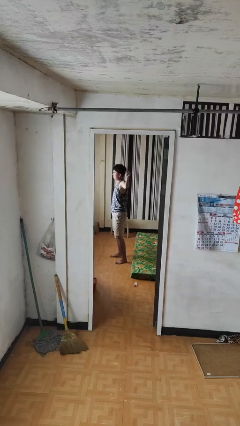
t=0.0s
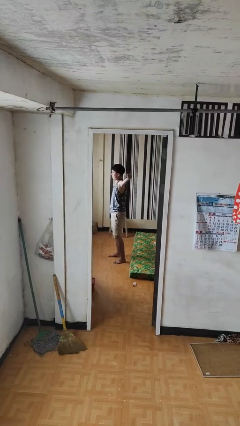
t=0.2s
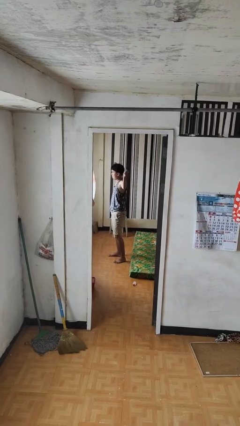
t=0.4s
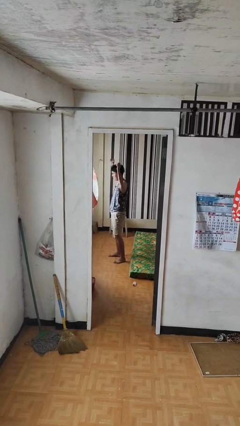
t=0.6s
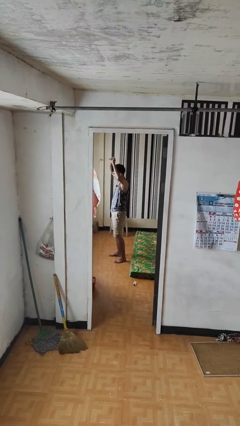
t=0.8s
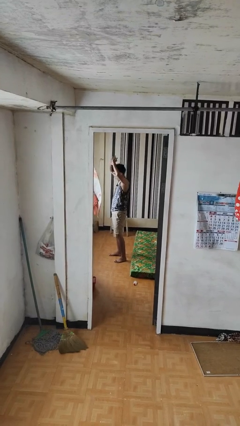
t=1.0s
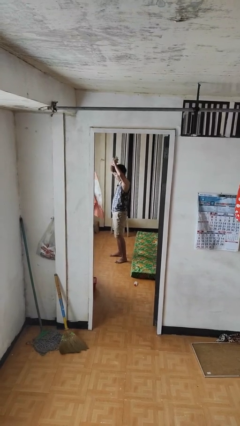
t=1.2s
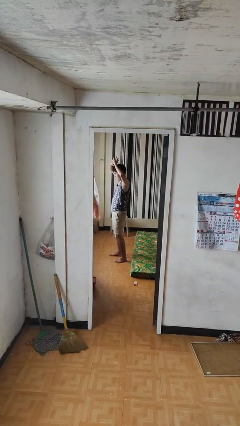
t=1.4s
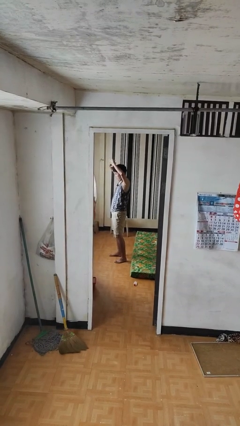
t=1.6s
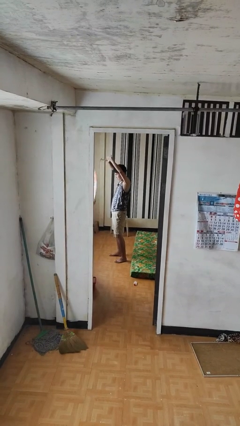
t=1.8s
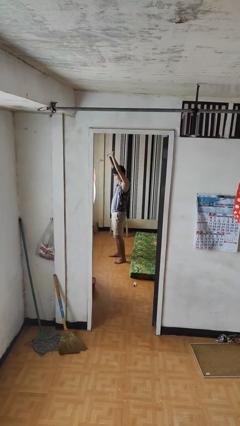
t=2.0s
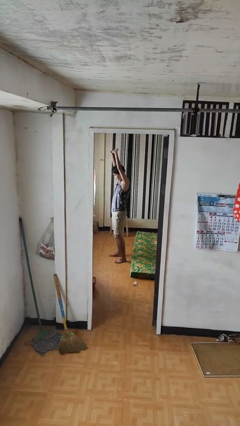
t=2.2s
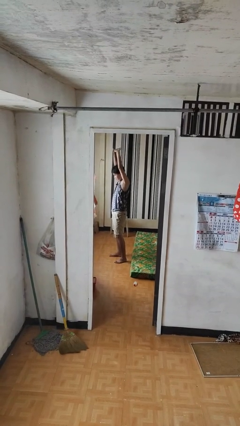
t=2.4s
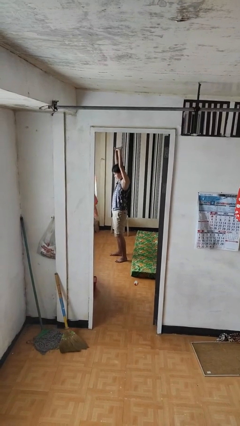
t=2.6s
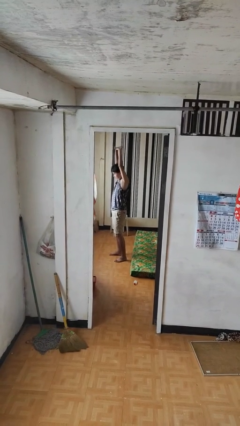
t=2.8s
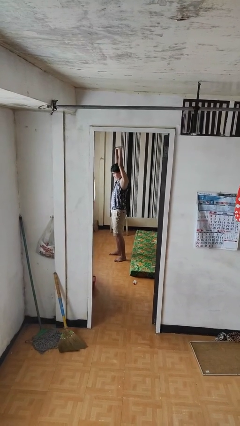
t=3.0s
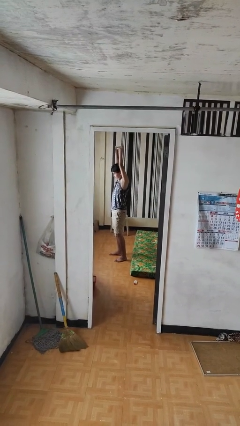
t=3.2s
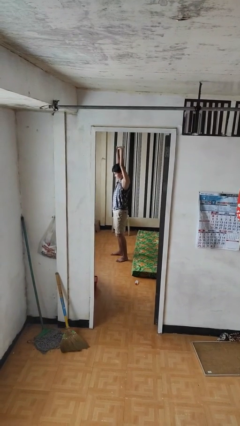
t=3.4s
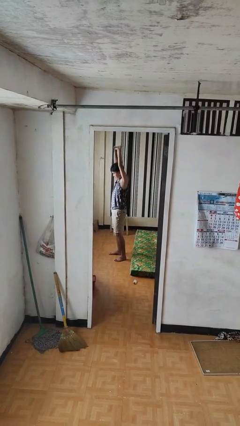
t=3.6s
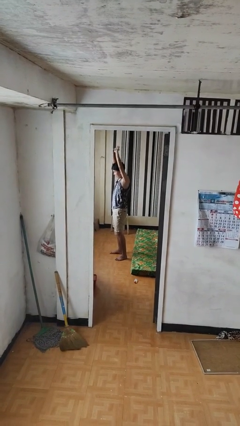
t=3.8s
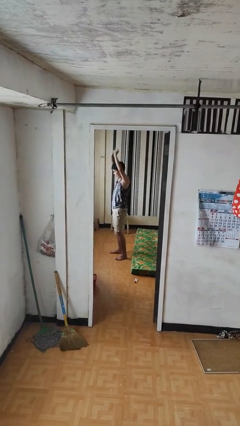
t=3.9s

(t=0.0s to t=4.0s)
person stretches arms over head

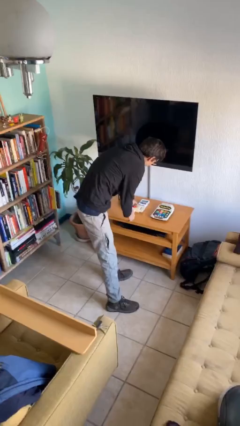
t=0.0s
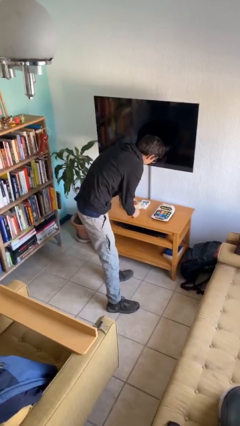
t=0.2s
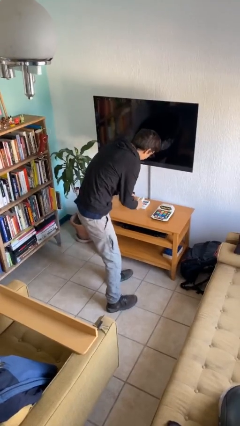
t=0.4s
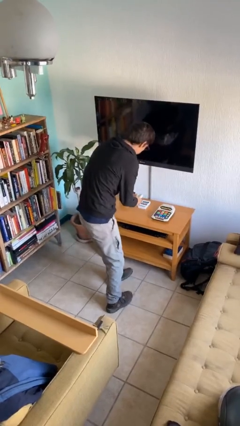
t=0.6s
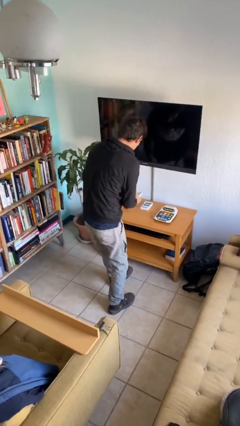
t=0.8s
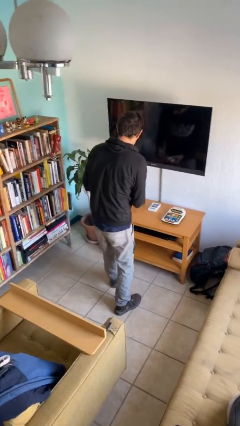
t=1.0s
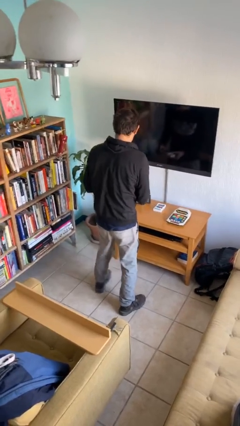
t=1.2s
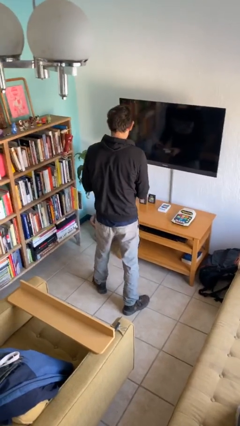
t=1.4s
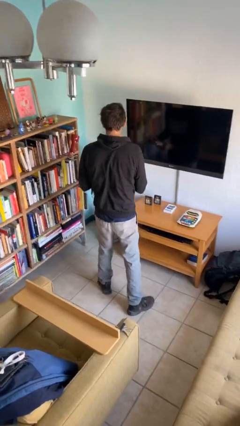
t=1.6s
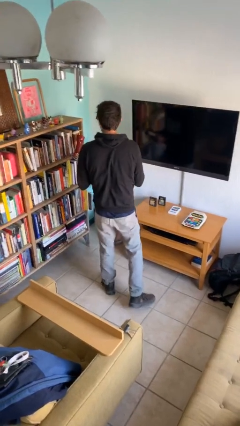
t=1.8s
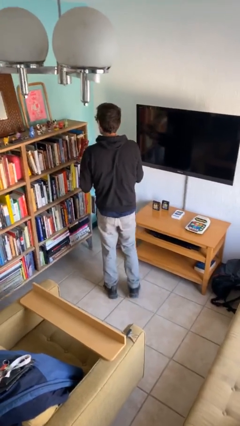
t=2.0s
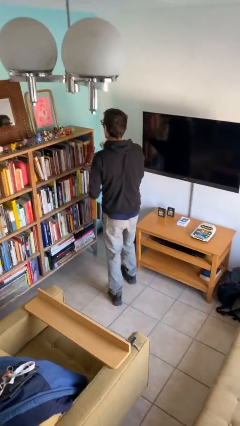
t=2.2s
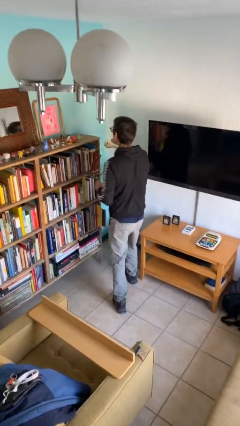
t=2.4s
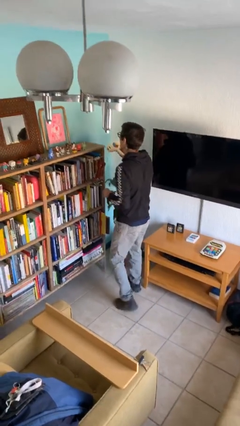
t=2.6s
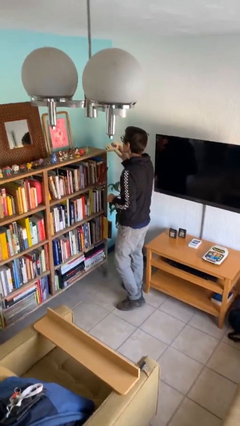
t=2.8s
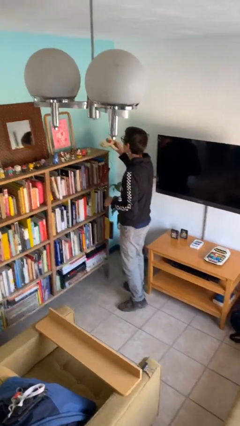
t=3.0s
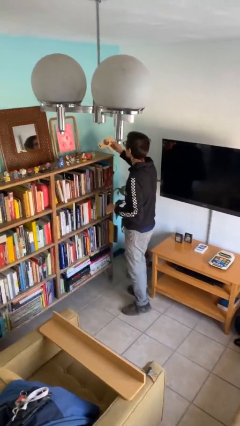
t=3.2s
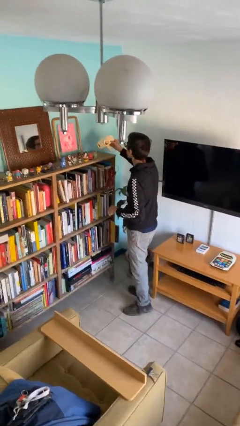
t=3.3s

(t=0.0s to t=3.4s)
person picks up object from table

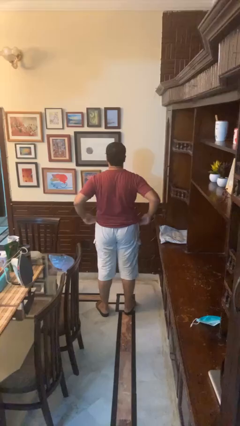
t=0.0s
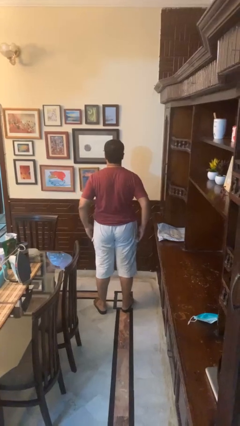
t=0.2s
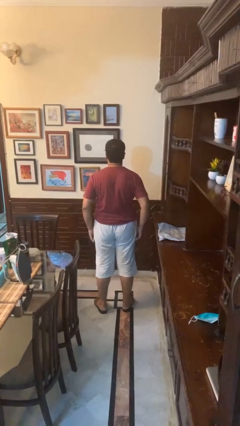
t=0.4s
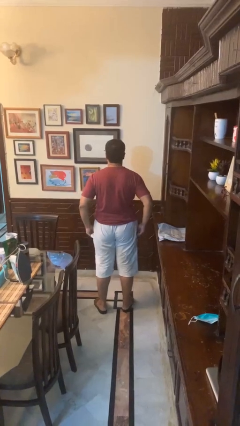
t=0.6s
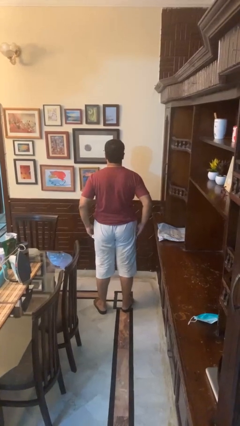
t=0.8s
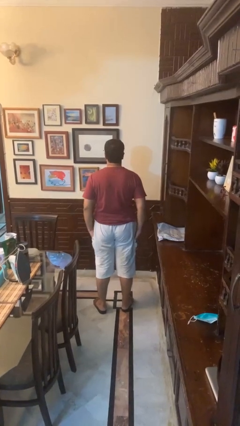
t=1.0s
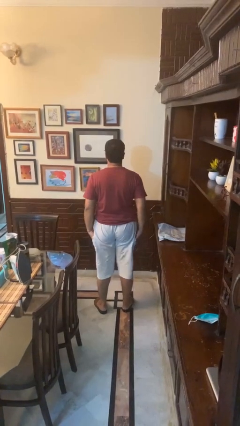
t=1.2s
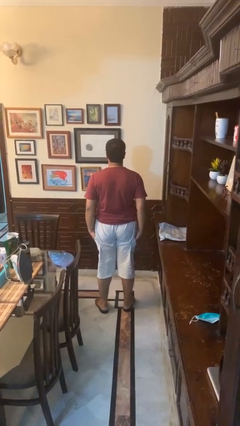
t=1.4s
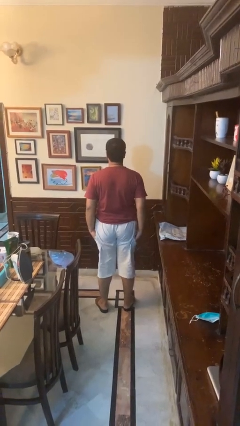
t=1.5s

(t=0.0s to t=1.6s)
person puts hands in back pockets

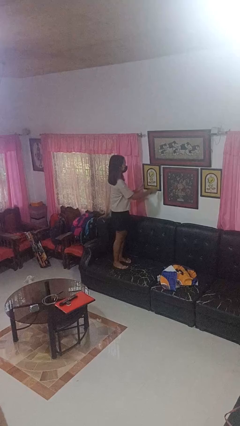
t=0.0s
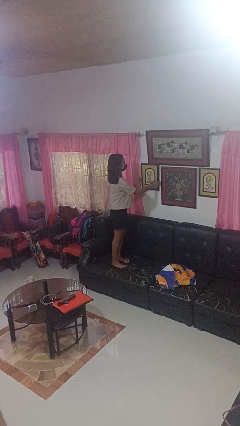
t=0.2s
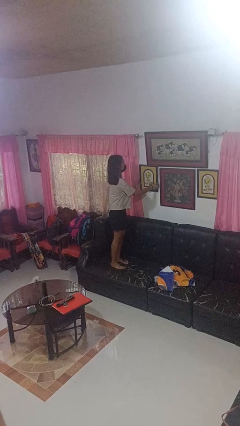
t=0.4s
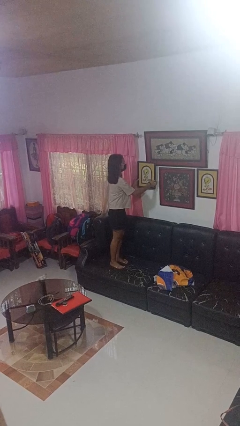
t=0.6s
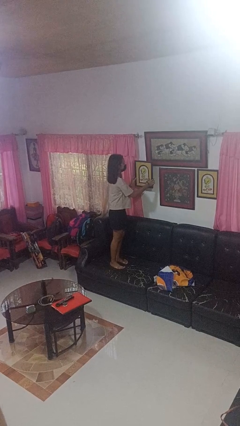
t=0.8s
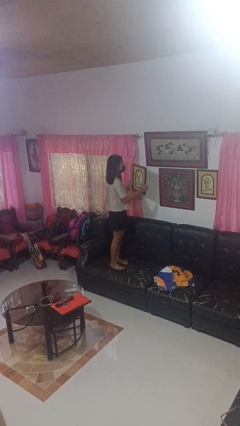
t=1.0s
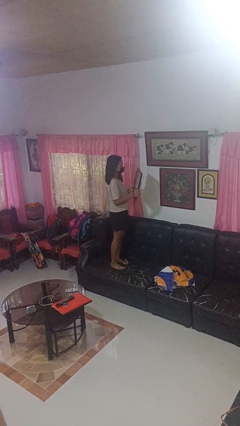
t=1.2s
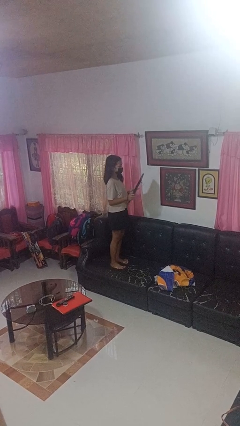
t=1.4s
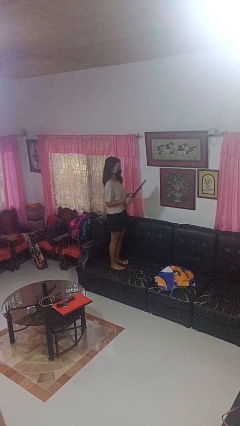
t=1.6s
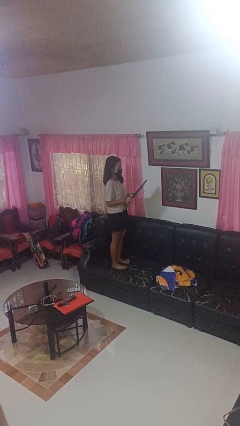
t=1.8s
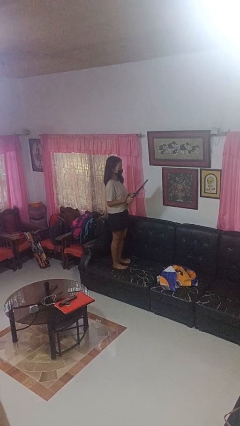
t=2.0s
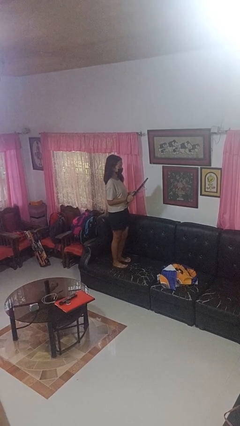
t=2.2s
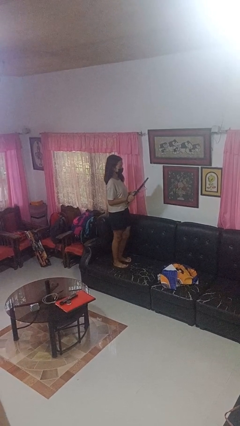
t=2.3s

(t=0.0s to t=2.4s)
person takes down picture frame

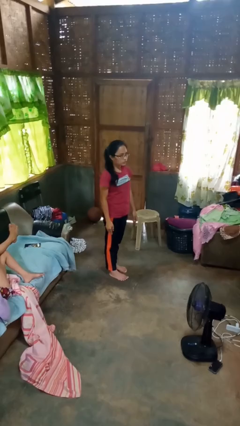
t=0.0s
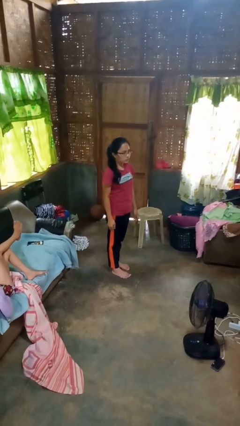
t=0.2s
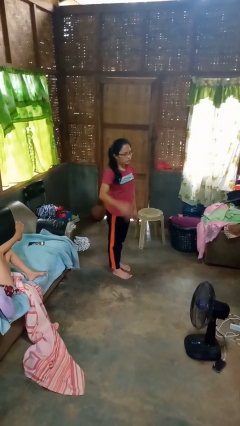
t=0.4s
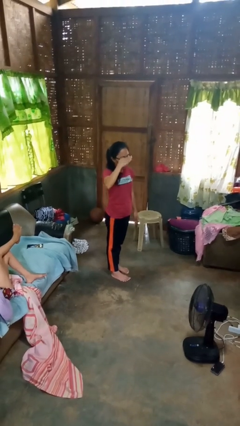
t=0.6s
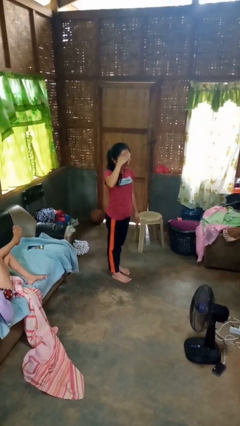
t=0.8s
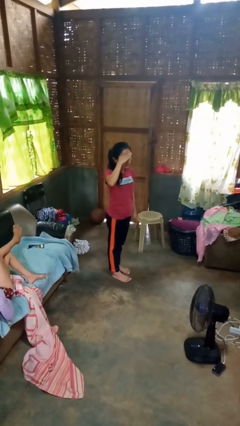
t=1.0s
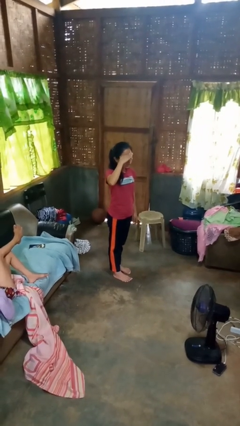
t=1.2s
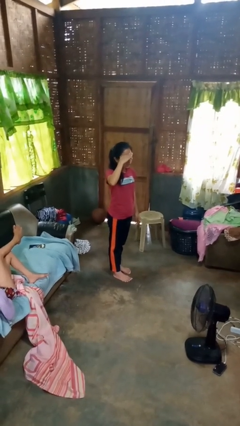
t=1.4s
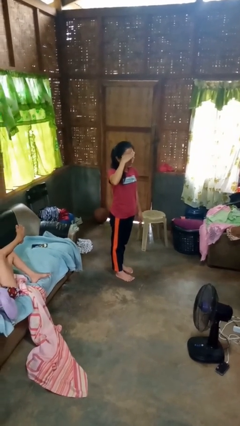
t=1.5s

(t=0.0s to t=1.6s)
person salutes

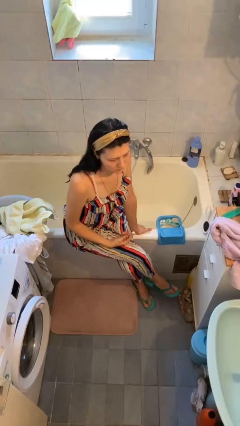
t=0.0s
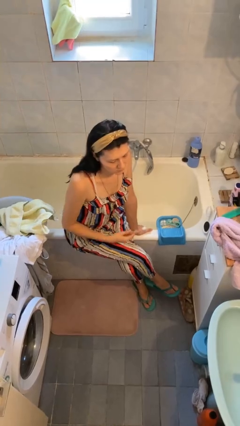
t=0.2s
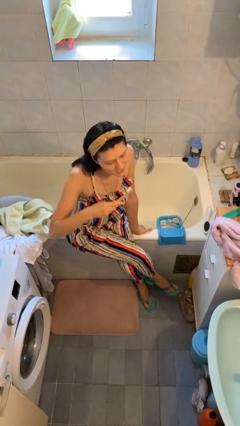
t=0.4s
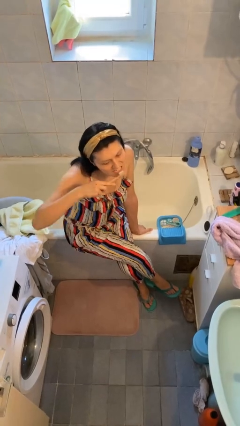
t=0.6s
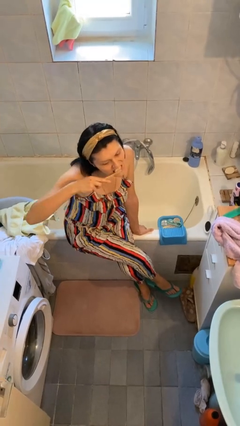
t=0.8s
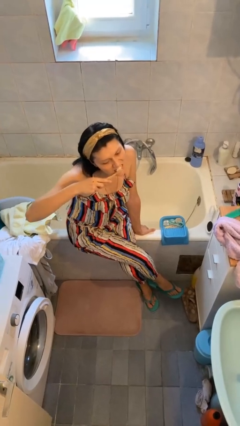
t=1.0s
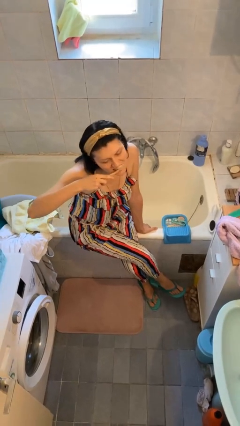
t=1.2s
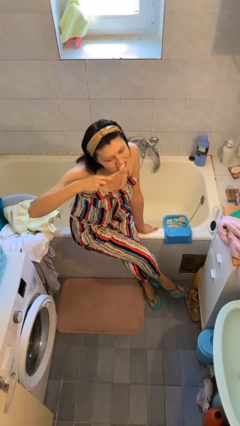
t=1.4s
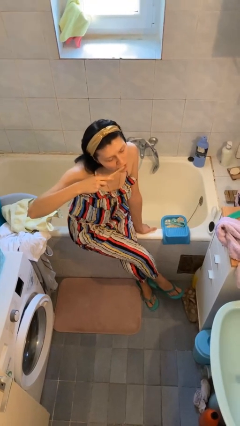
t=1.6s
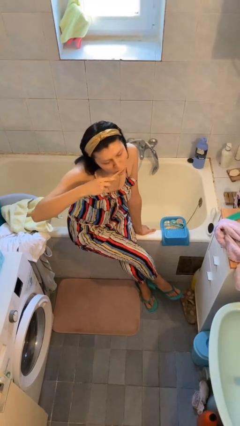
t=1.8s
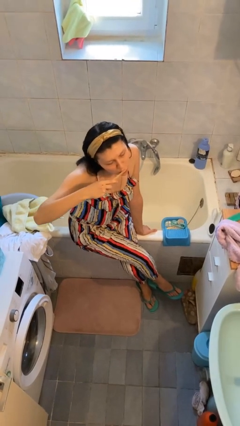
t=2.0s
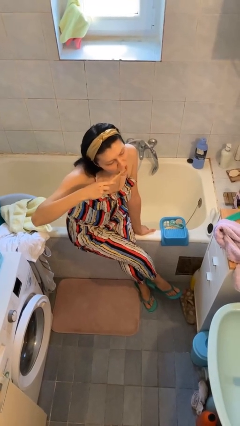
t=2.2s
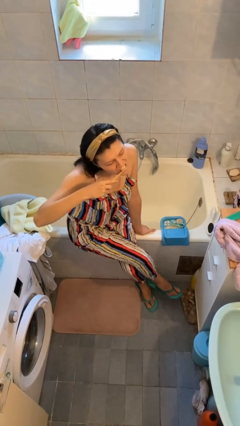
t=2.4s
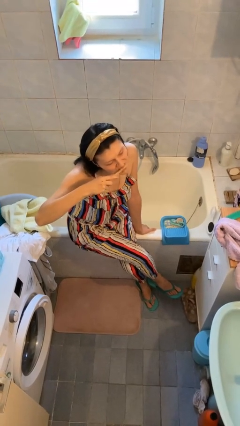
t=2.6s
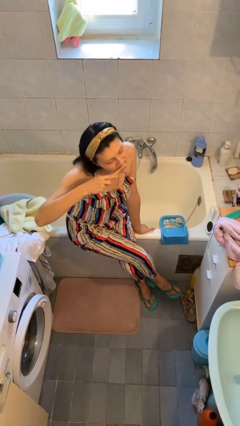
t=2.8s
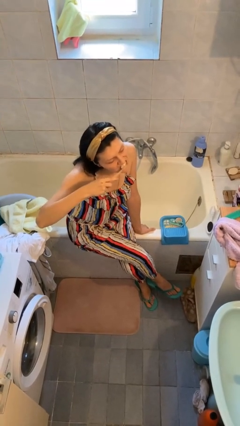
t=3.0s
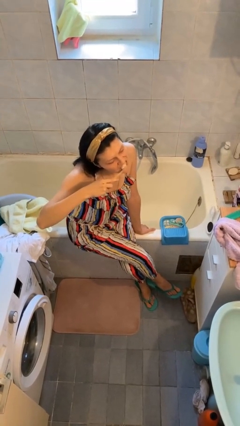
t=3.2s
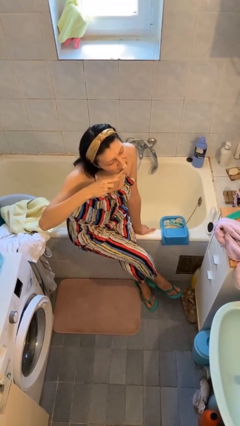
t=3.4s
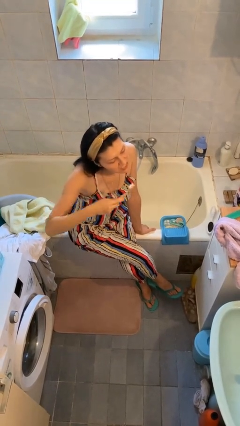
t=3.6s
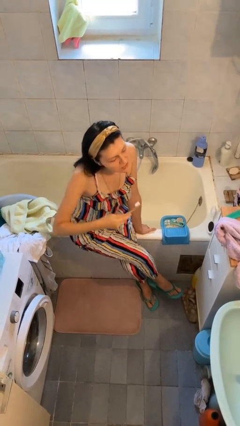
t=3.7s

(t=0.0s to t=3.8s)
person brushes teeth

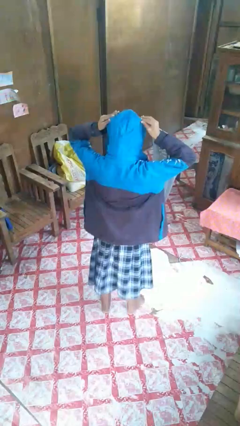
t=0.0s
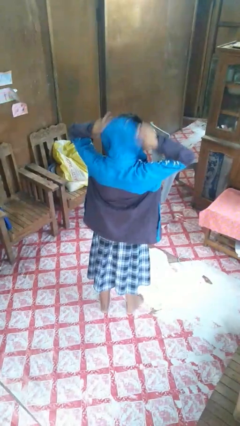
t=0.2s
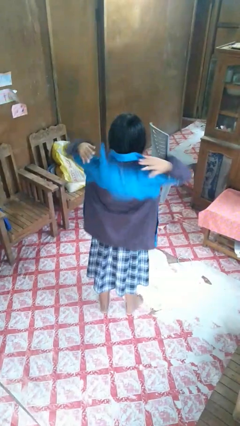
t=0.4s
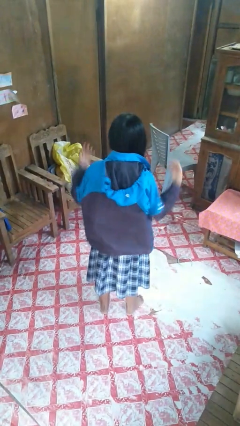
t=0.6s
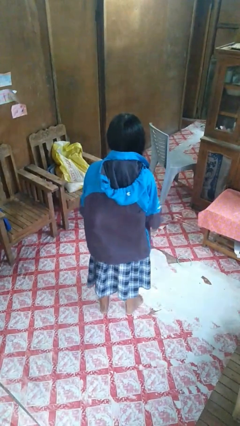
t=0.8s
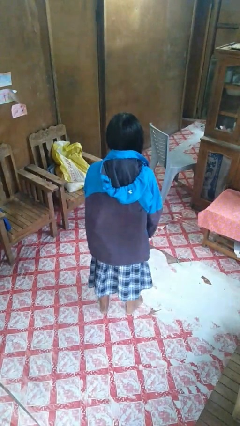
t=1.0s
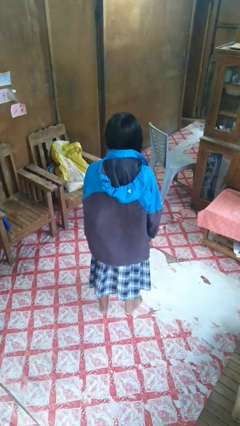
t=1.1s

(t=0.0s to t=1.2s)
person takes off hoodie
